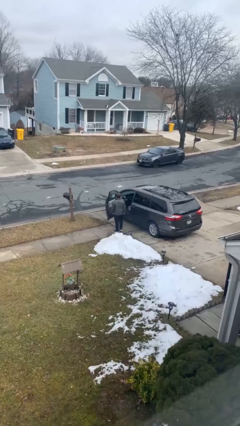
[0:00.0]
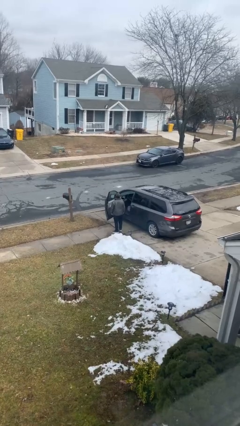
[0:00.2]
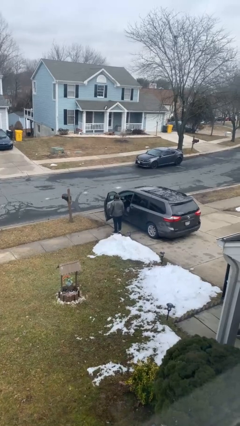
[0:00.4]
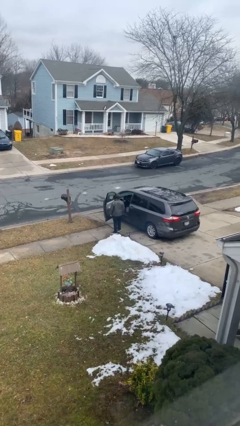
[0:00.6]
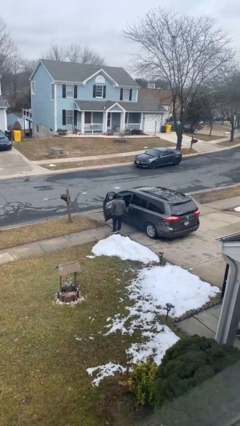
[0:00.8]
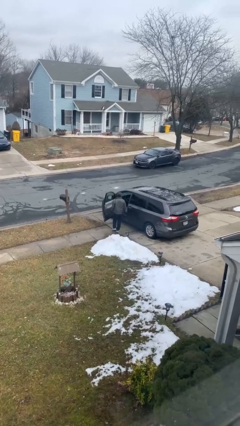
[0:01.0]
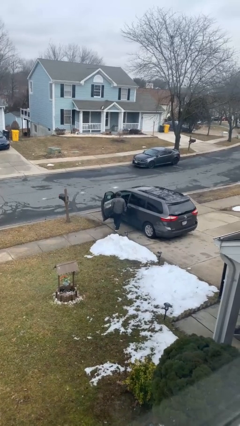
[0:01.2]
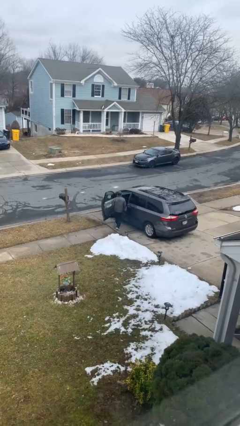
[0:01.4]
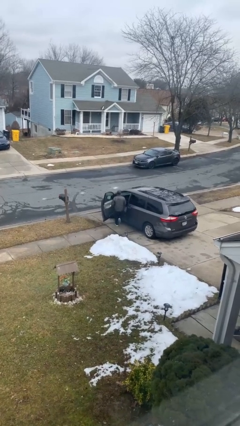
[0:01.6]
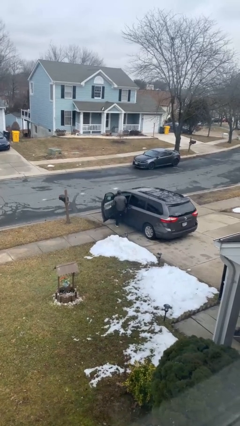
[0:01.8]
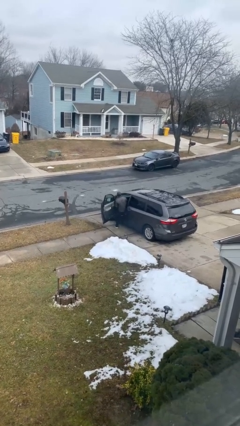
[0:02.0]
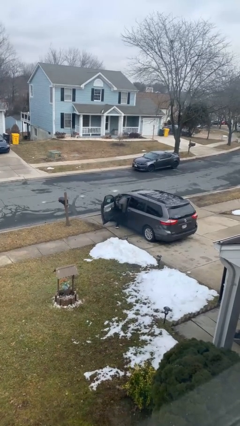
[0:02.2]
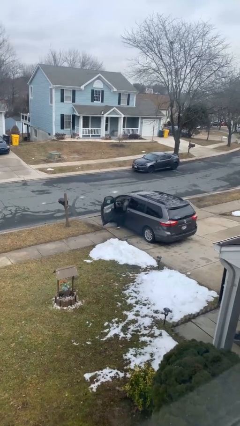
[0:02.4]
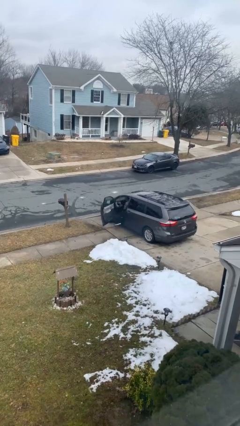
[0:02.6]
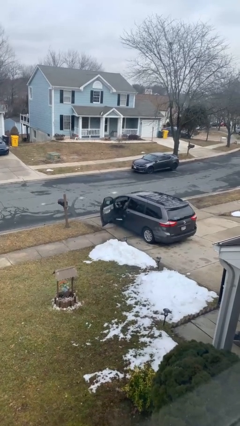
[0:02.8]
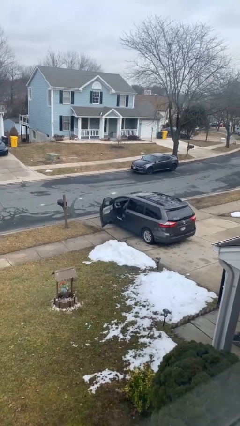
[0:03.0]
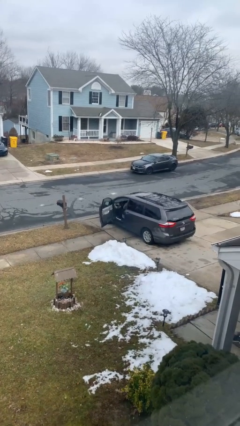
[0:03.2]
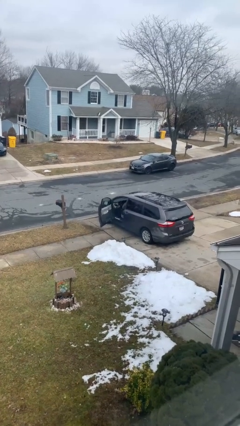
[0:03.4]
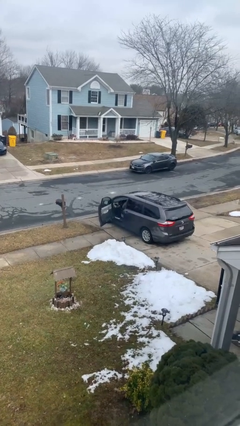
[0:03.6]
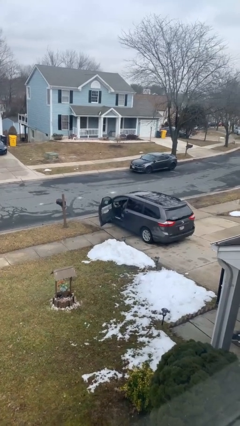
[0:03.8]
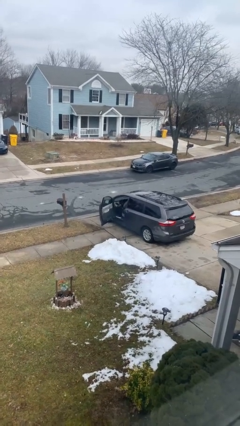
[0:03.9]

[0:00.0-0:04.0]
person enters car

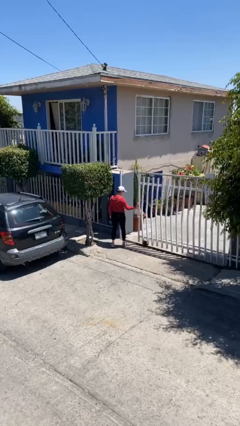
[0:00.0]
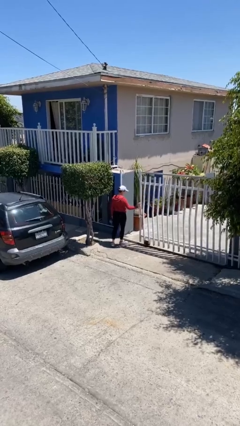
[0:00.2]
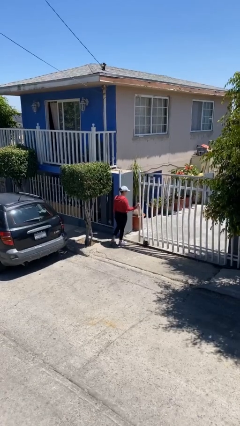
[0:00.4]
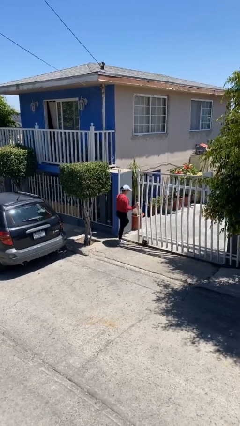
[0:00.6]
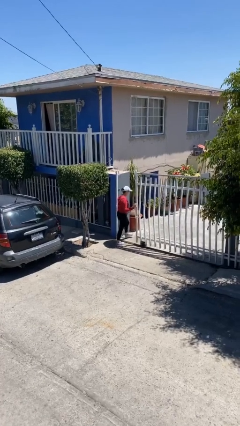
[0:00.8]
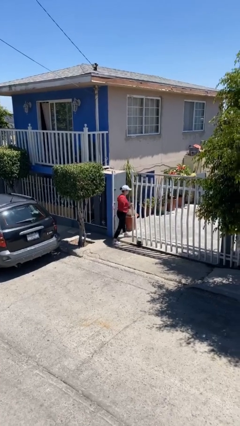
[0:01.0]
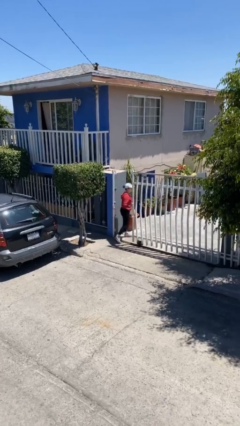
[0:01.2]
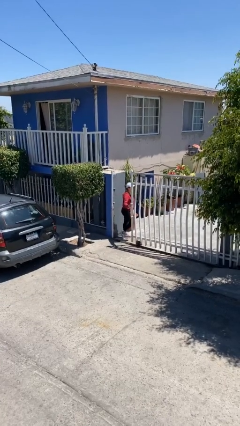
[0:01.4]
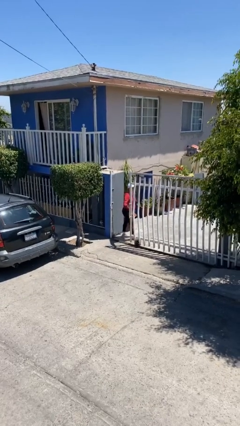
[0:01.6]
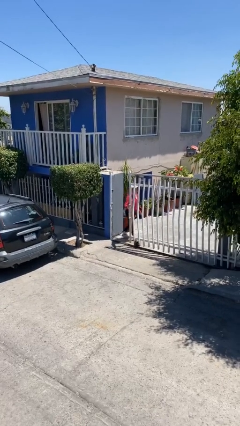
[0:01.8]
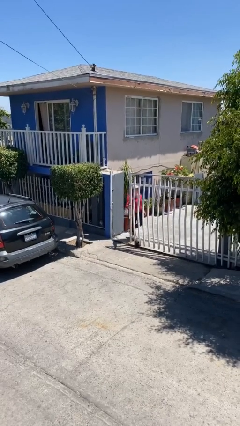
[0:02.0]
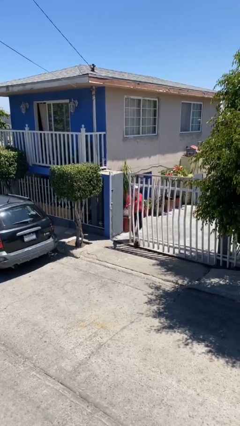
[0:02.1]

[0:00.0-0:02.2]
person exits scene through structure

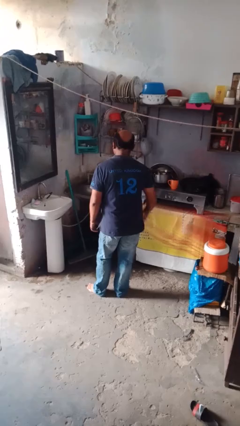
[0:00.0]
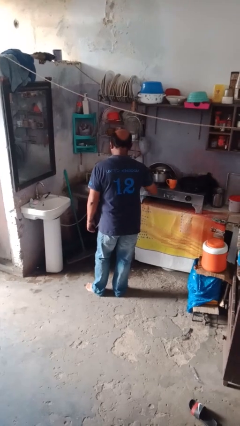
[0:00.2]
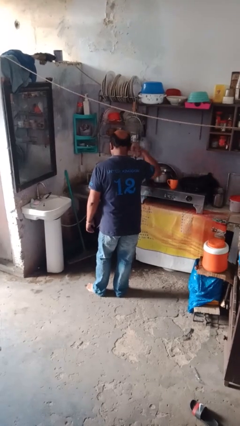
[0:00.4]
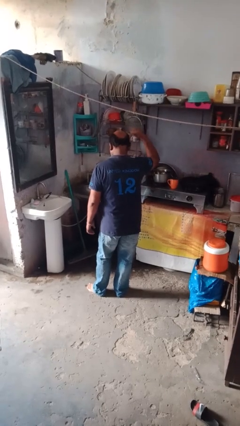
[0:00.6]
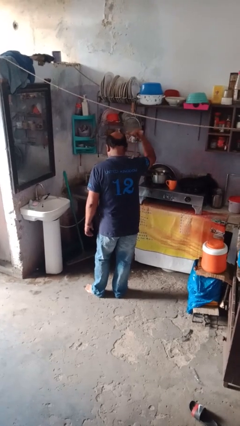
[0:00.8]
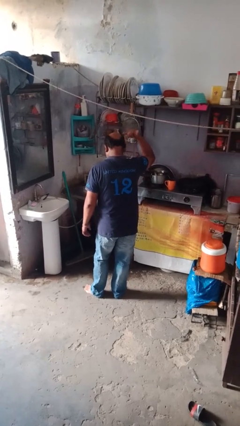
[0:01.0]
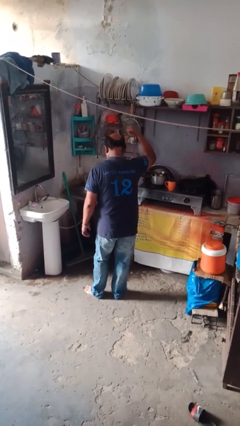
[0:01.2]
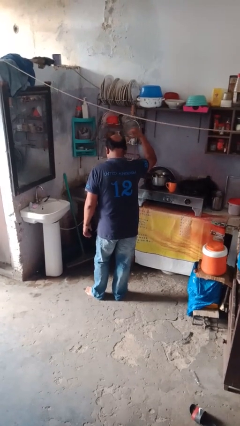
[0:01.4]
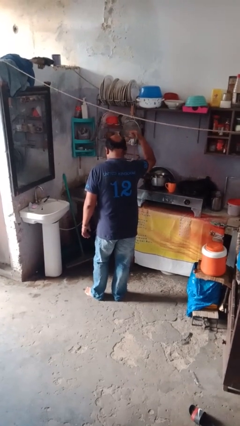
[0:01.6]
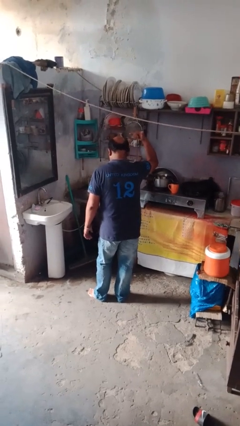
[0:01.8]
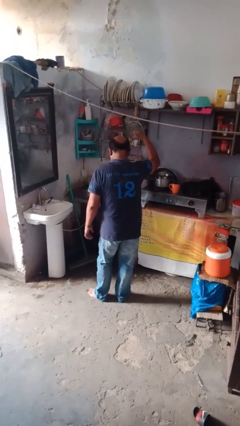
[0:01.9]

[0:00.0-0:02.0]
person gestures hang loose

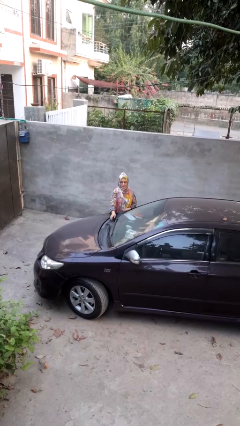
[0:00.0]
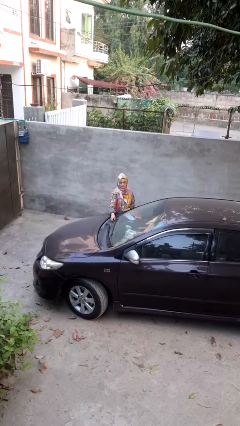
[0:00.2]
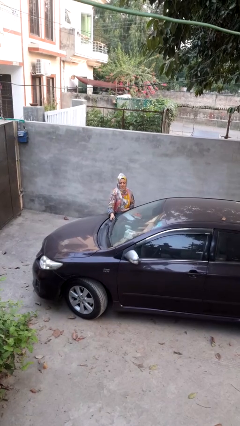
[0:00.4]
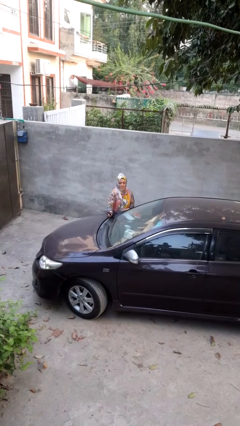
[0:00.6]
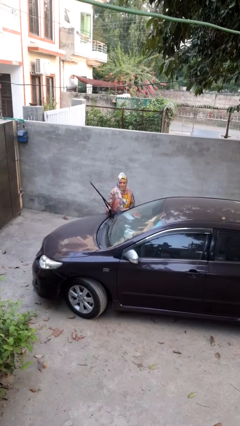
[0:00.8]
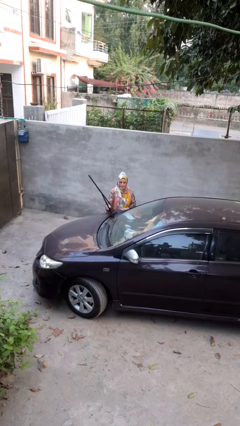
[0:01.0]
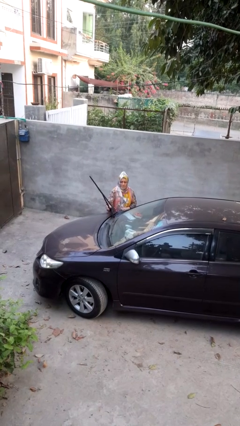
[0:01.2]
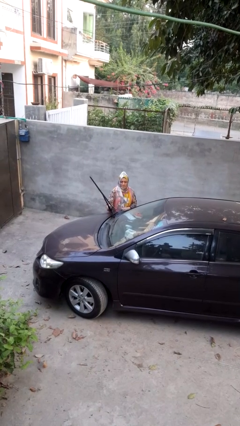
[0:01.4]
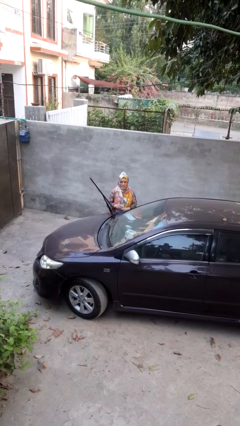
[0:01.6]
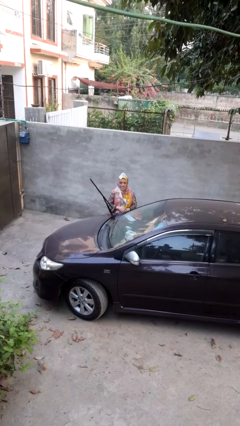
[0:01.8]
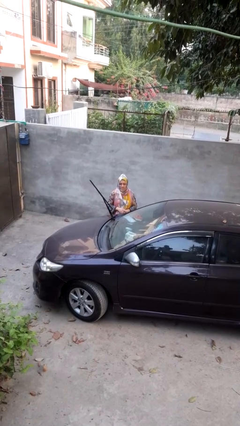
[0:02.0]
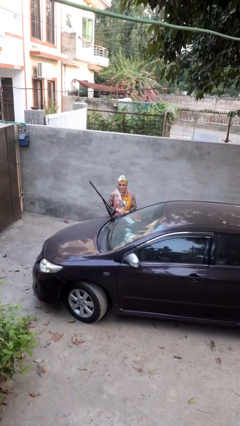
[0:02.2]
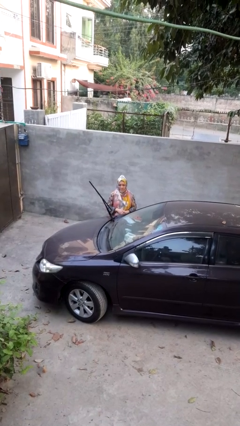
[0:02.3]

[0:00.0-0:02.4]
person flips up car wipers

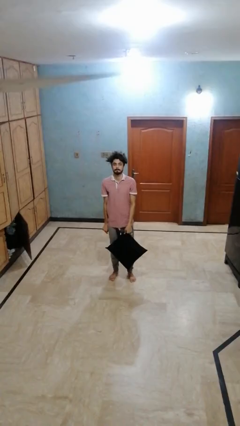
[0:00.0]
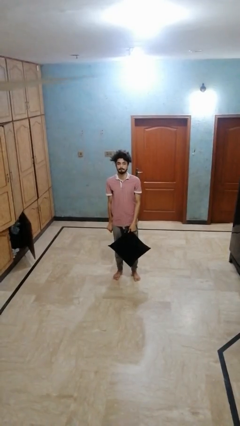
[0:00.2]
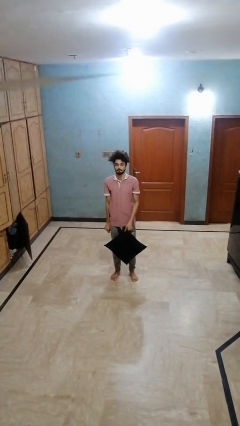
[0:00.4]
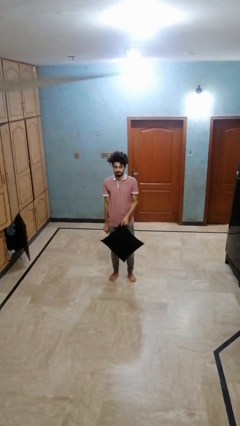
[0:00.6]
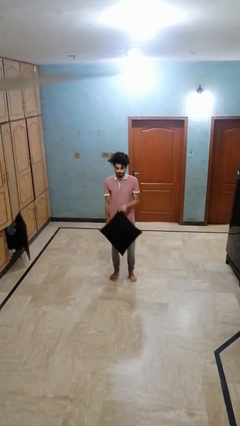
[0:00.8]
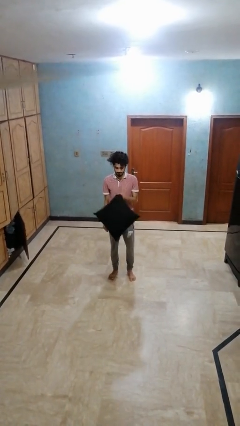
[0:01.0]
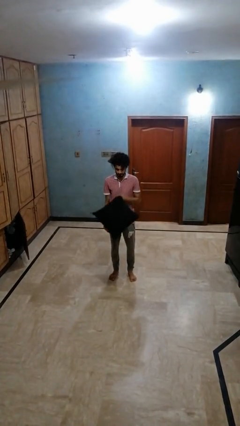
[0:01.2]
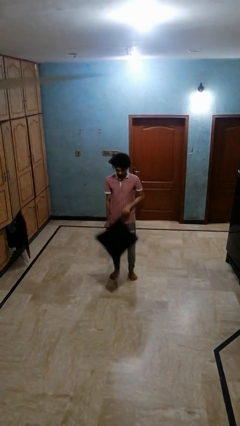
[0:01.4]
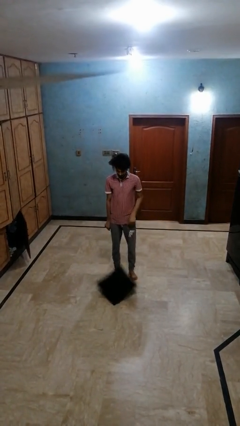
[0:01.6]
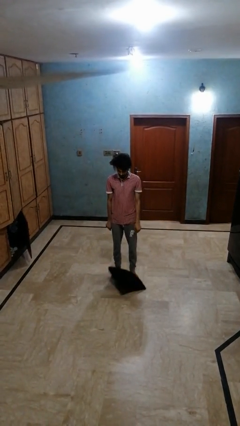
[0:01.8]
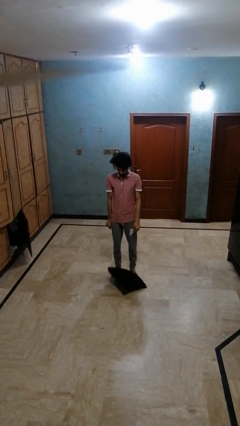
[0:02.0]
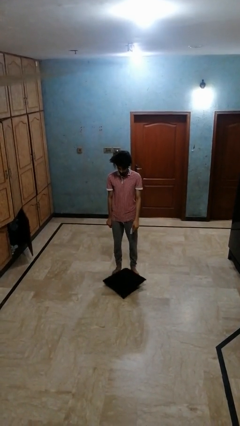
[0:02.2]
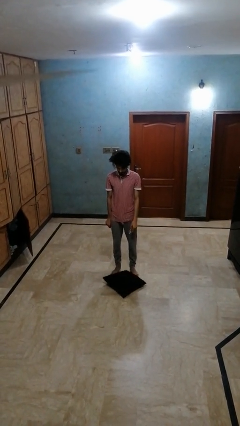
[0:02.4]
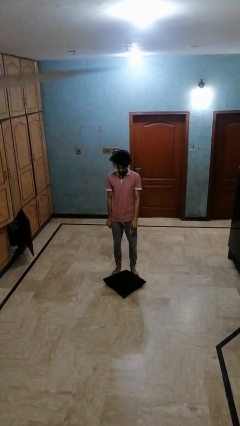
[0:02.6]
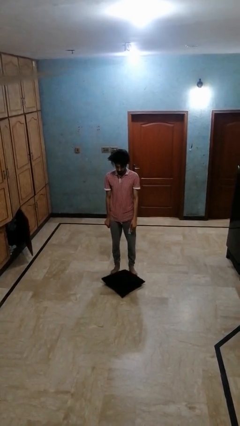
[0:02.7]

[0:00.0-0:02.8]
person throws object to ground

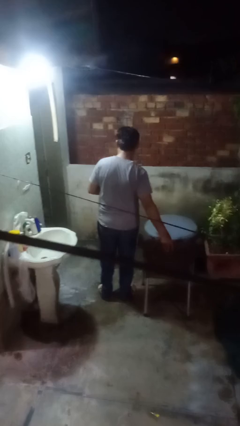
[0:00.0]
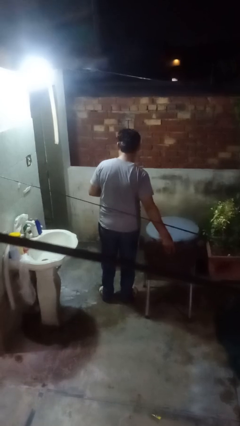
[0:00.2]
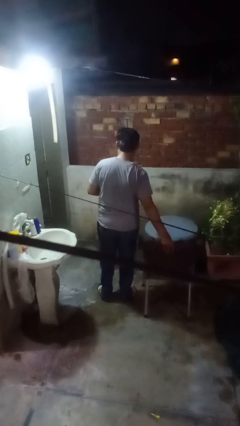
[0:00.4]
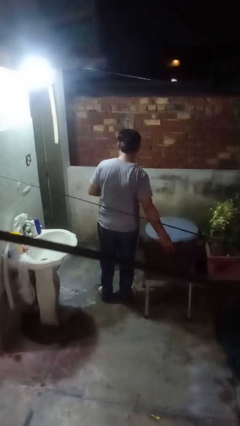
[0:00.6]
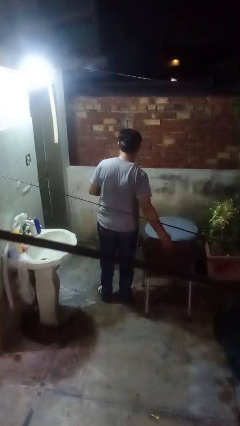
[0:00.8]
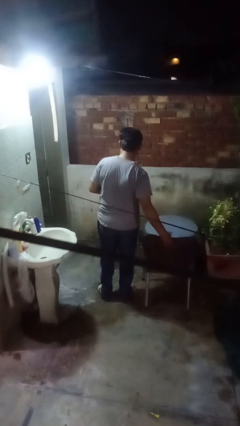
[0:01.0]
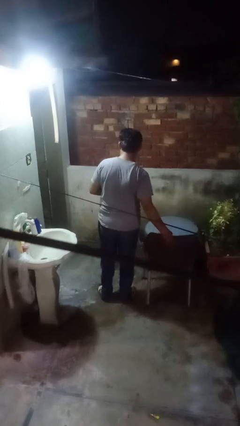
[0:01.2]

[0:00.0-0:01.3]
person pushes in chair

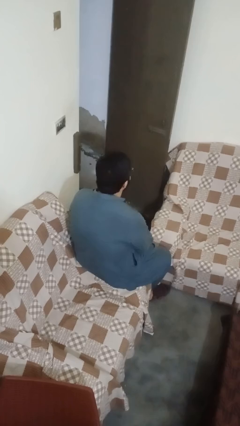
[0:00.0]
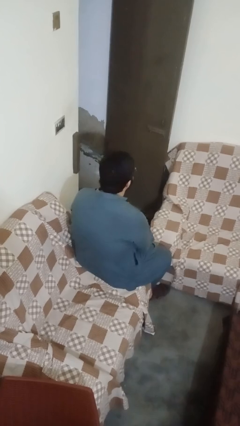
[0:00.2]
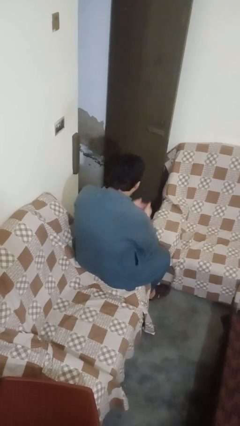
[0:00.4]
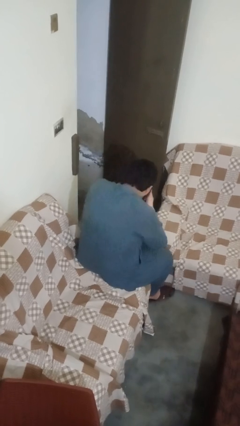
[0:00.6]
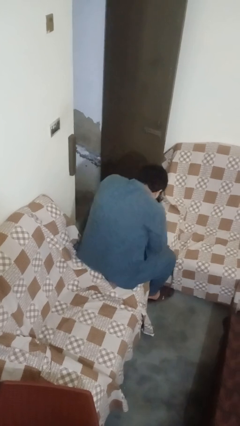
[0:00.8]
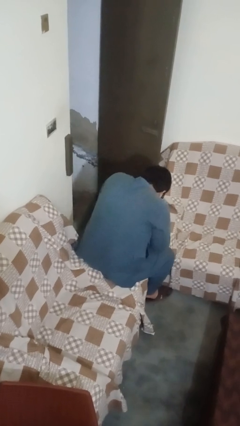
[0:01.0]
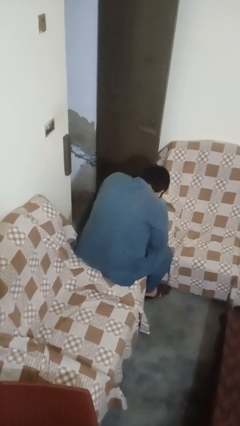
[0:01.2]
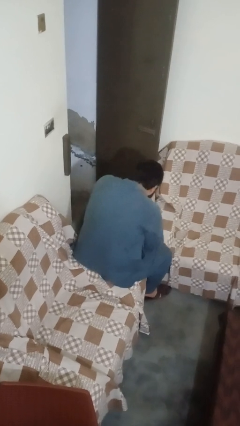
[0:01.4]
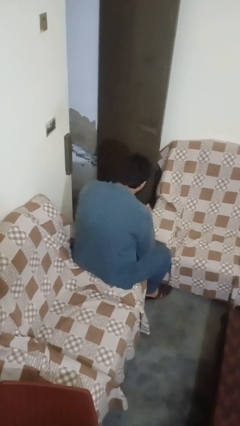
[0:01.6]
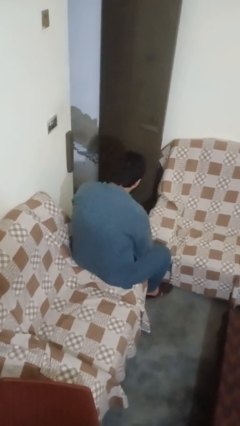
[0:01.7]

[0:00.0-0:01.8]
person sneezes into hand

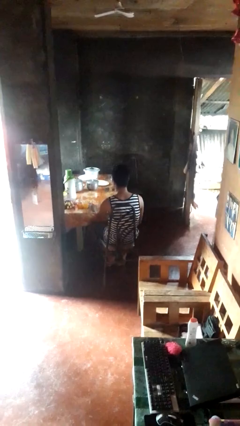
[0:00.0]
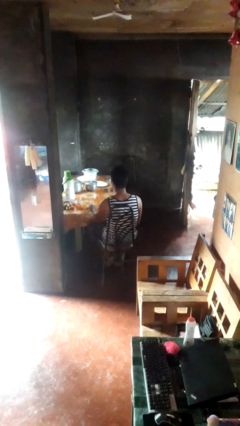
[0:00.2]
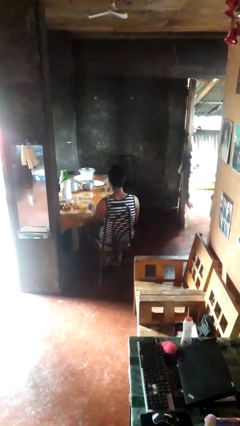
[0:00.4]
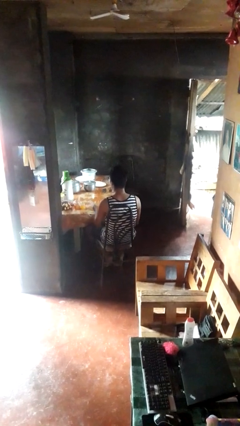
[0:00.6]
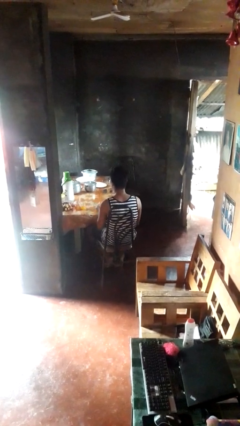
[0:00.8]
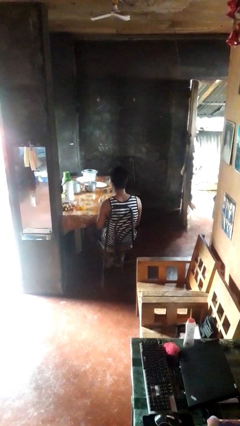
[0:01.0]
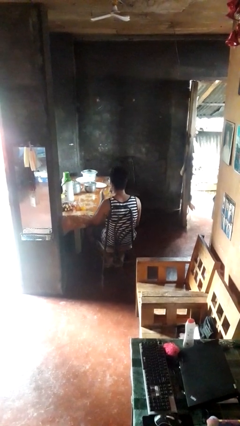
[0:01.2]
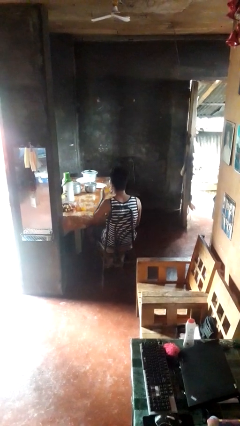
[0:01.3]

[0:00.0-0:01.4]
person picks up object from table
